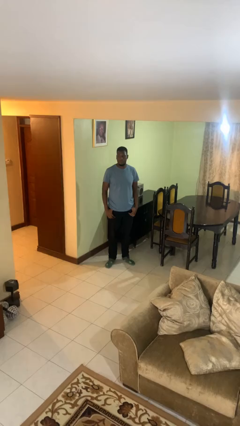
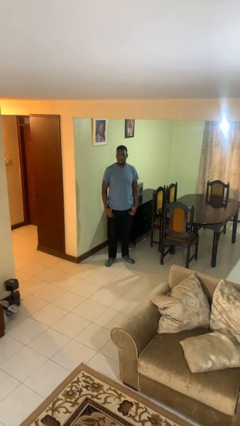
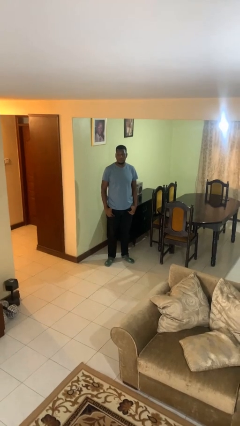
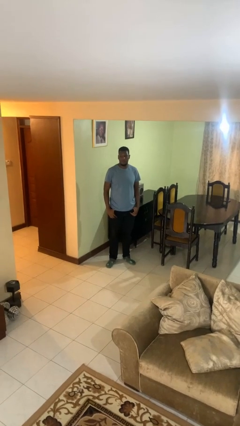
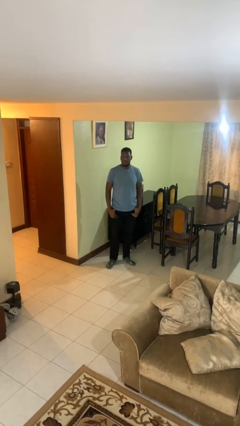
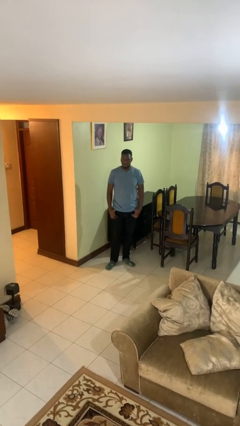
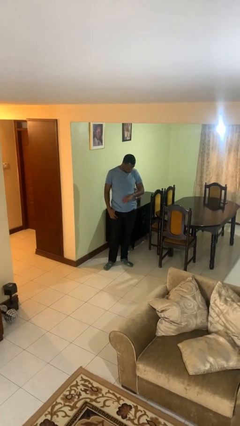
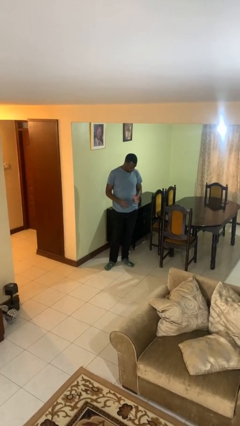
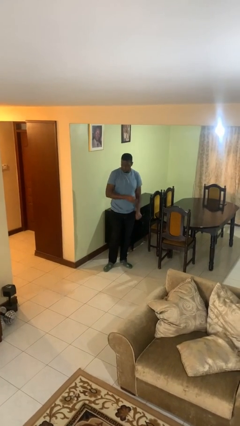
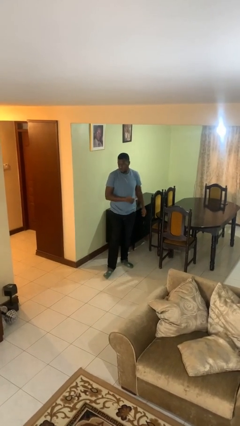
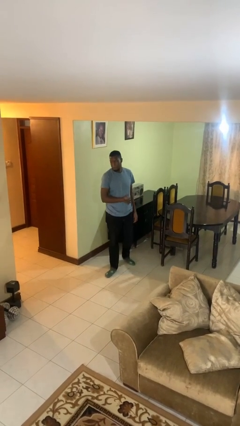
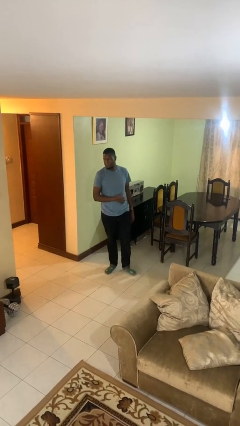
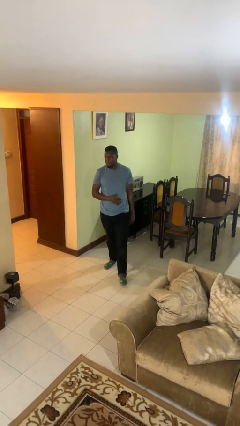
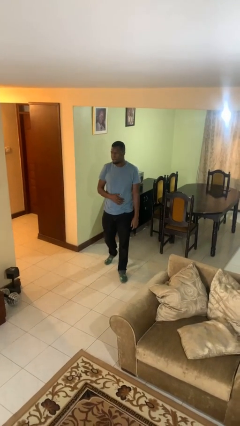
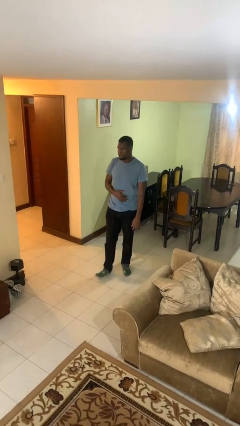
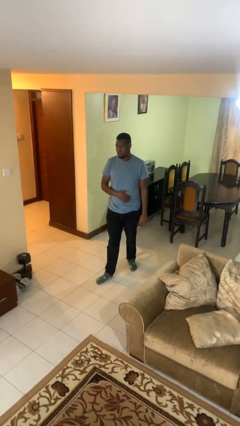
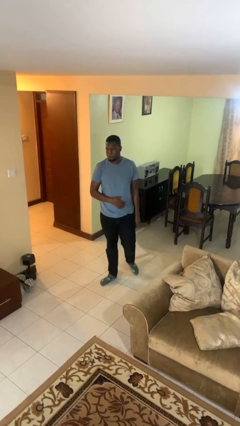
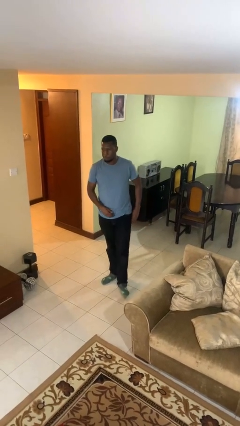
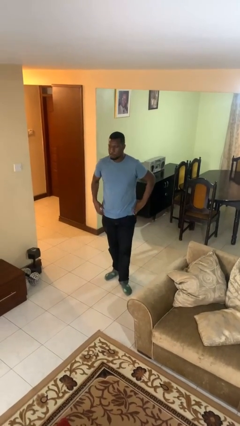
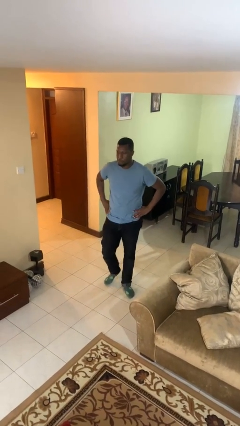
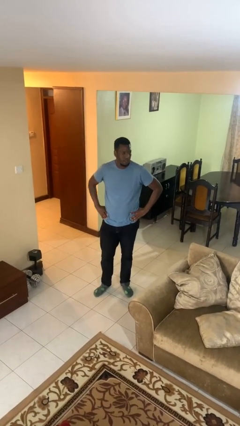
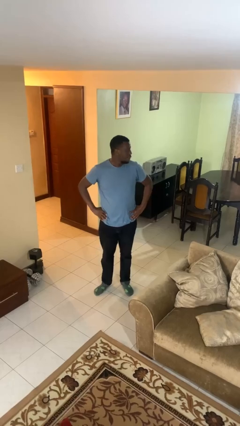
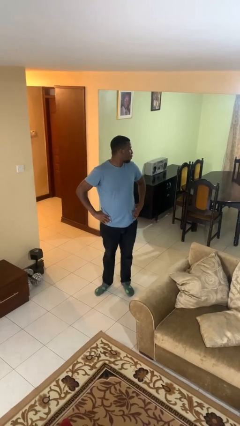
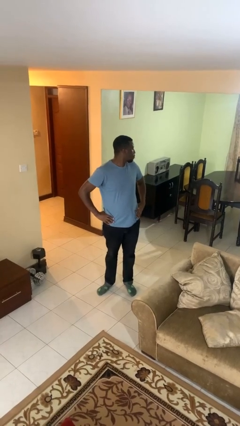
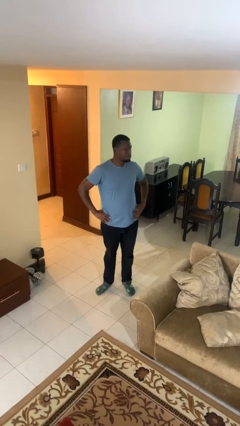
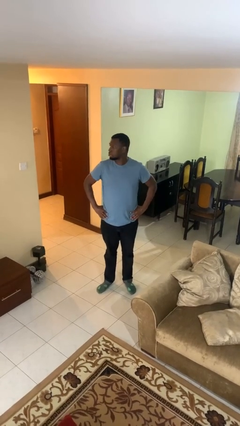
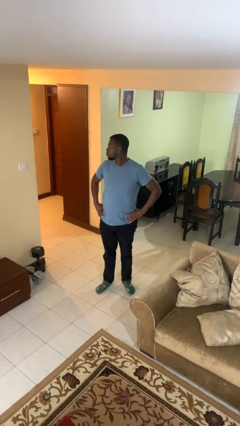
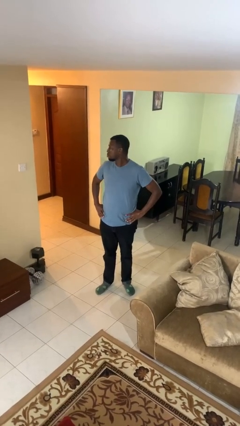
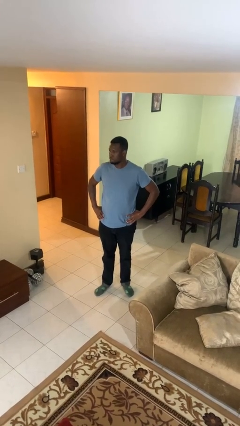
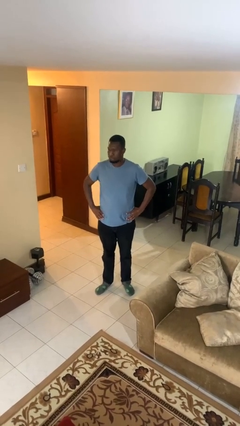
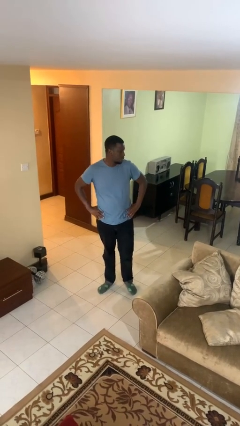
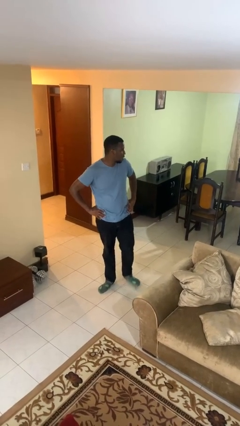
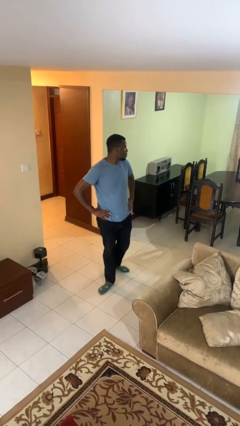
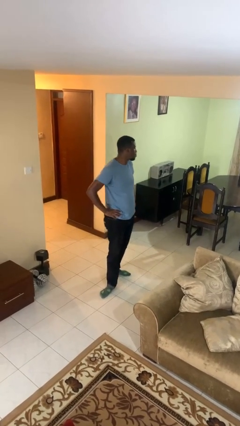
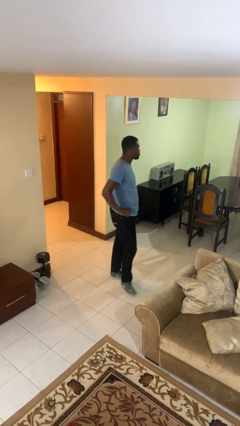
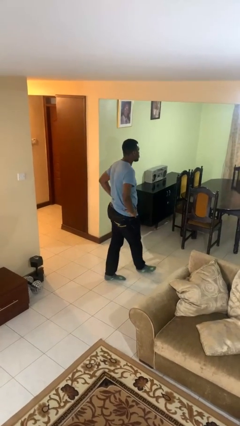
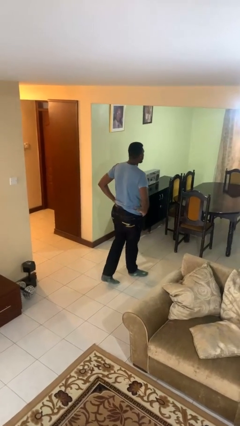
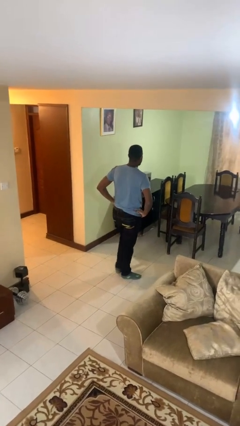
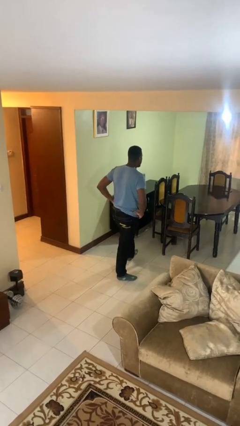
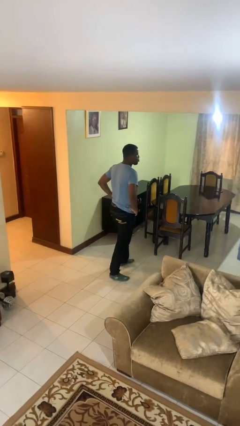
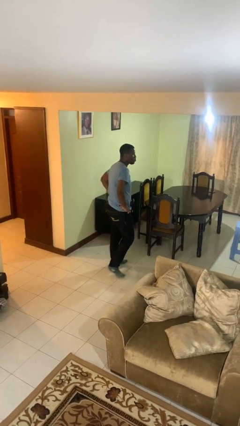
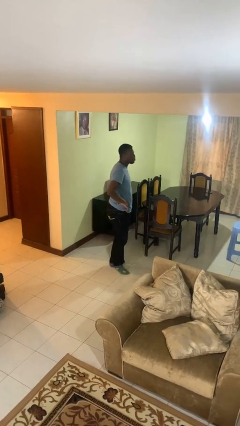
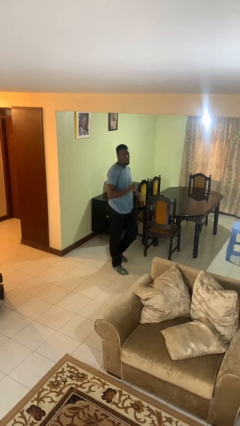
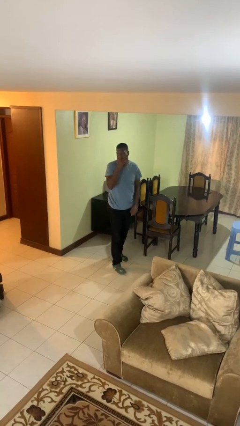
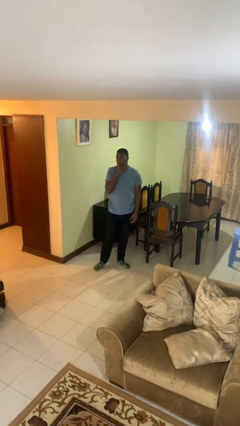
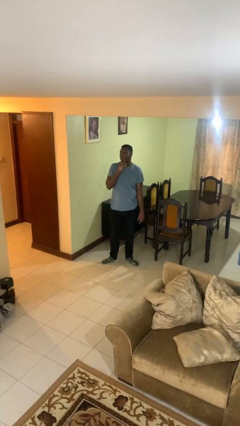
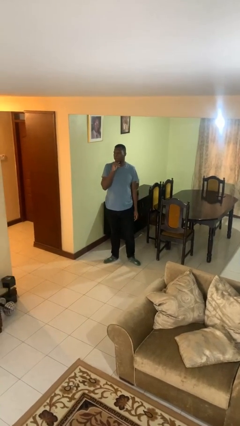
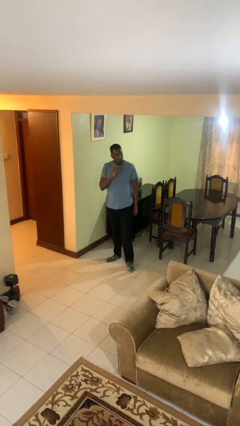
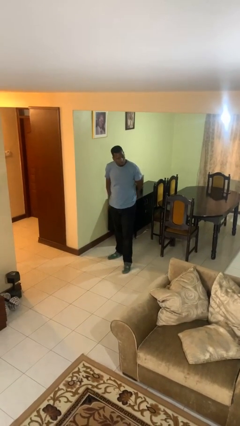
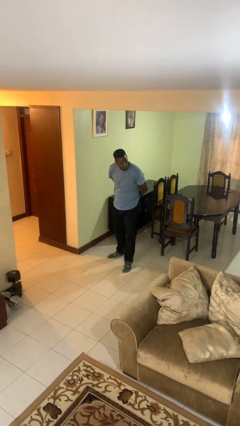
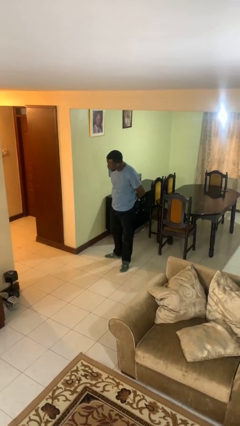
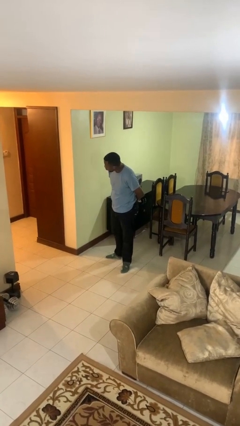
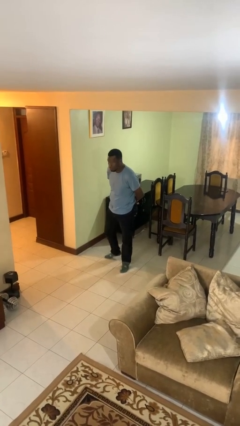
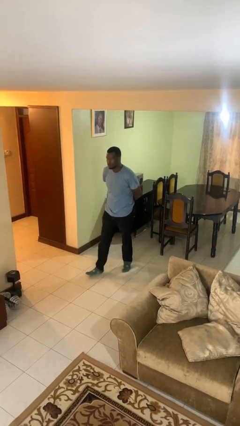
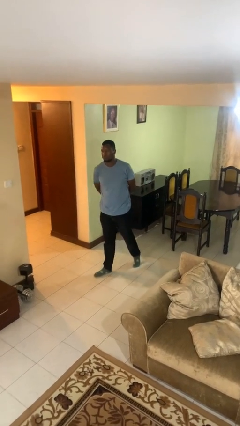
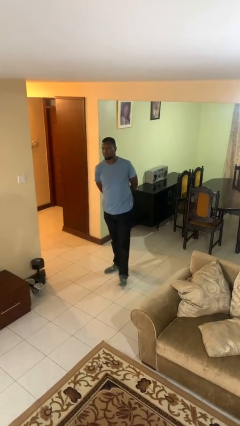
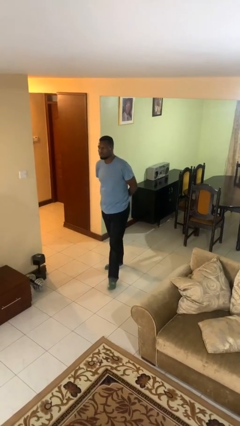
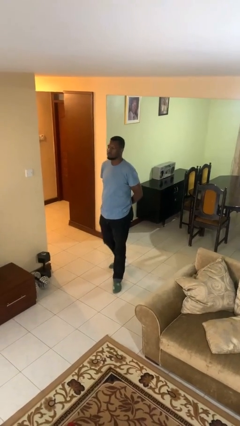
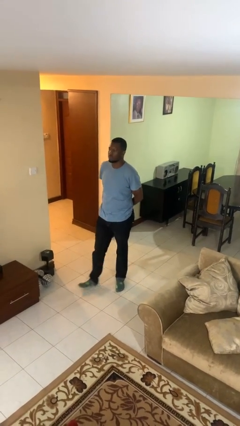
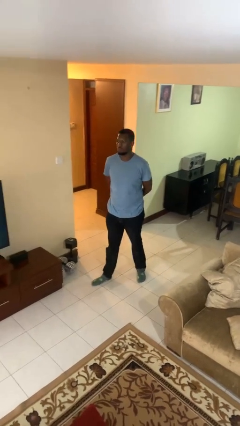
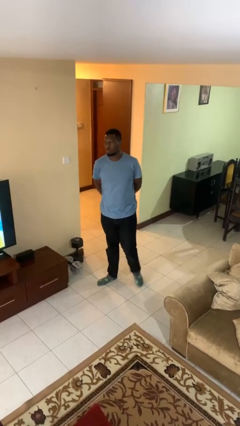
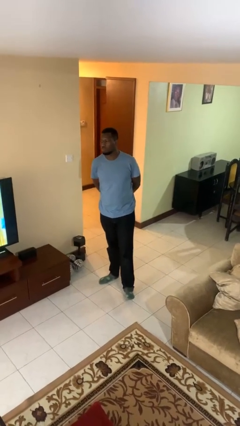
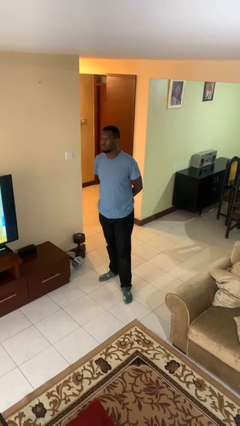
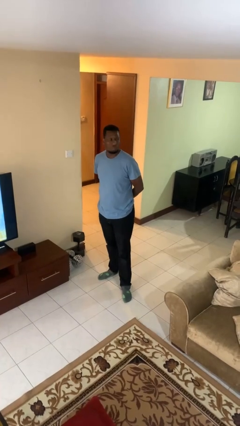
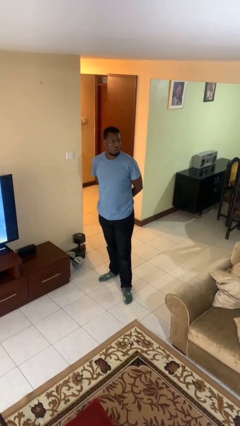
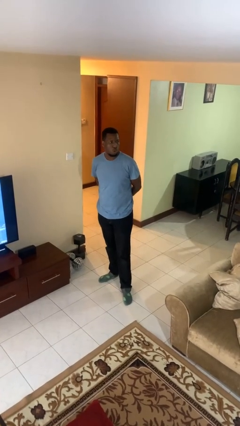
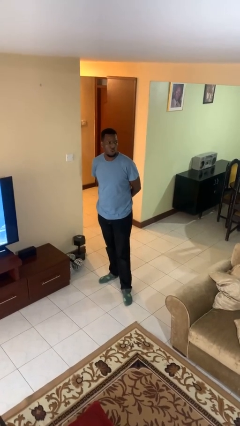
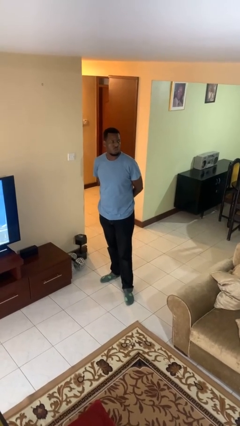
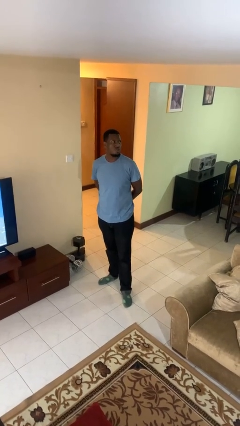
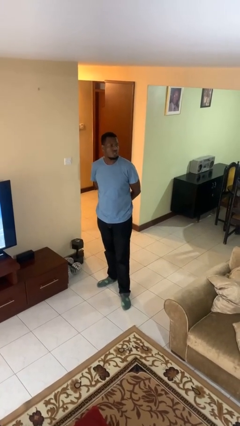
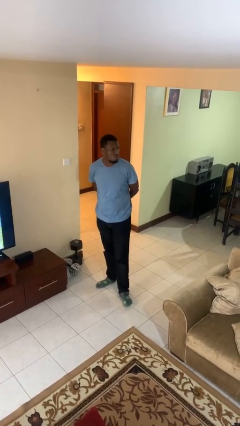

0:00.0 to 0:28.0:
person walks

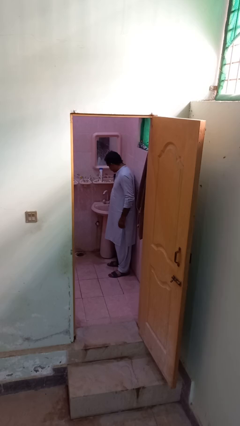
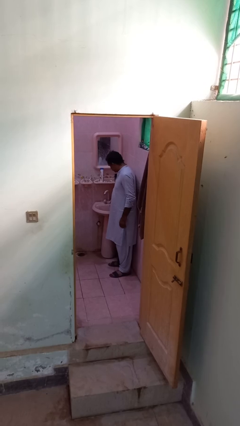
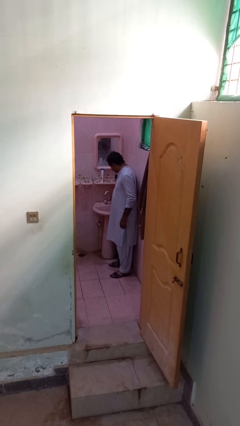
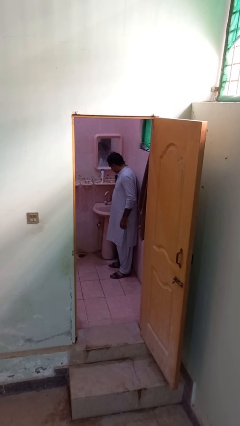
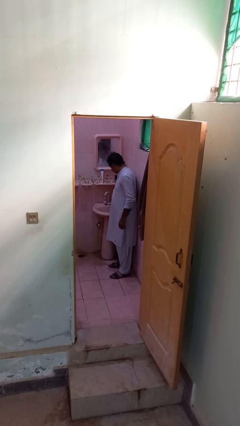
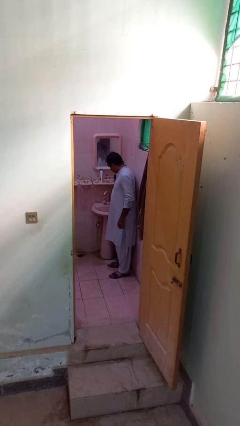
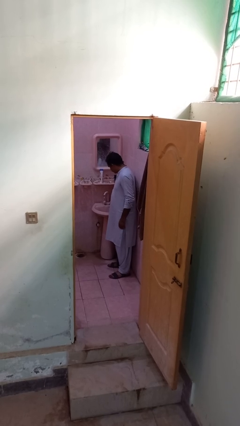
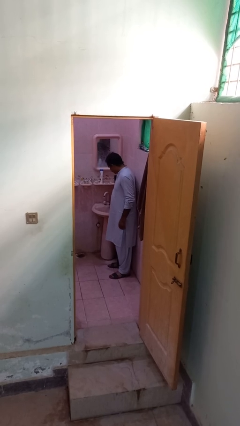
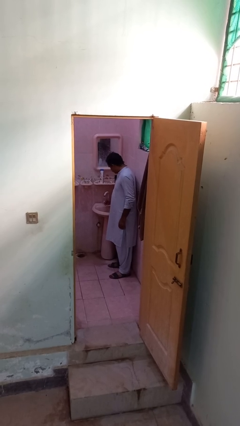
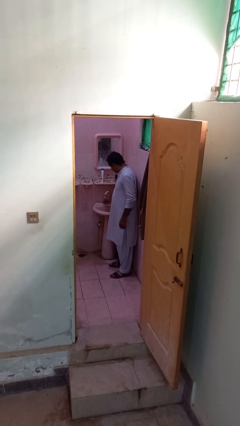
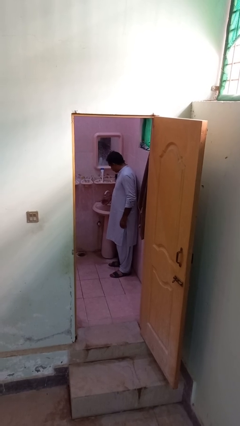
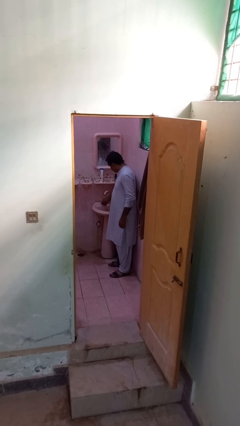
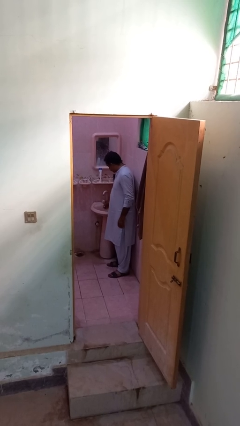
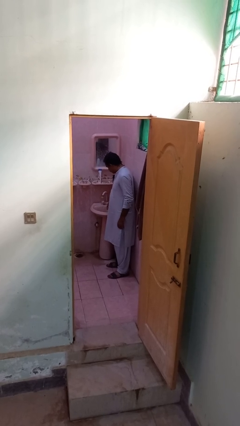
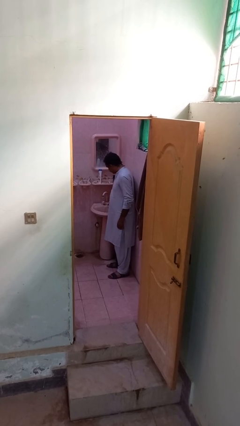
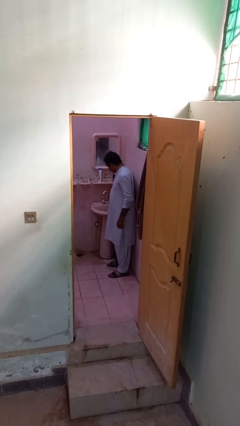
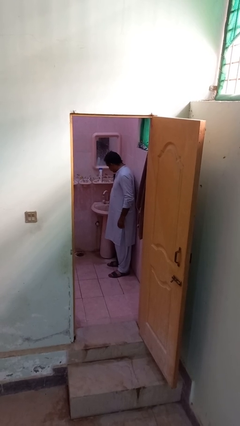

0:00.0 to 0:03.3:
person turns on faucet

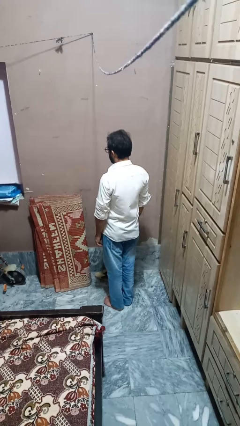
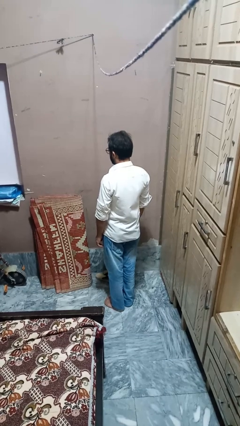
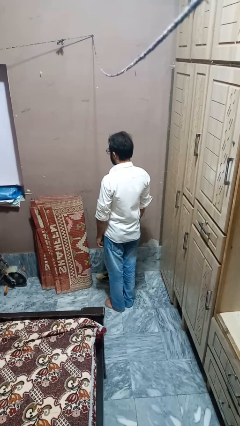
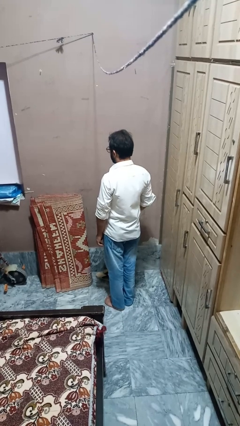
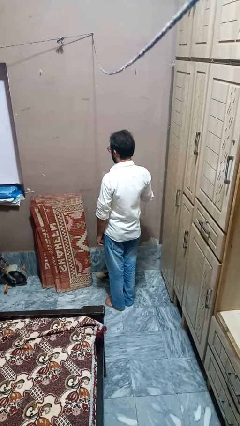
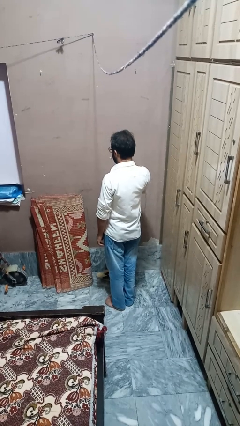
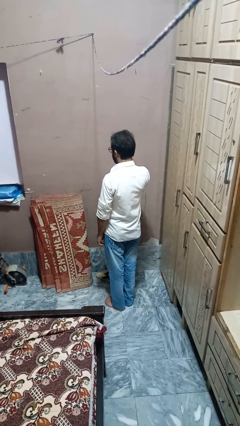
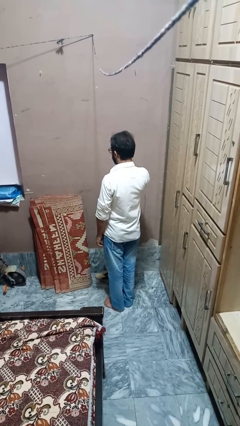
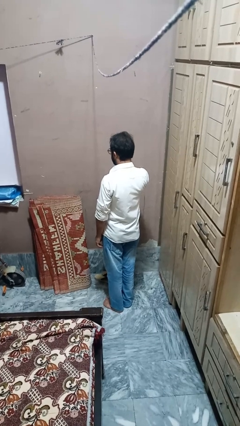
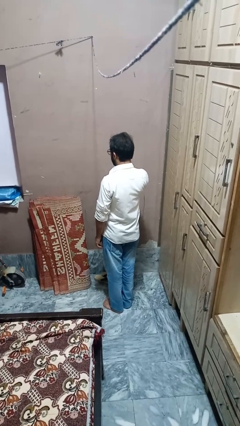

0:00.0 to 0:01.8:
person brushes teeth
